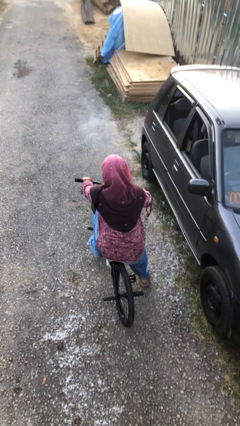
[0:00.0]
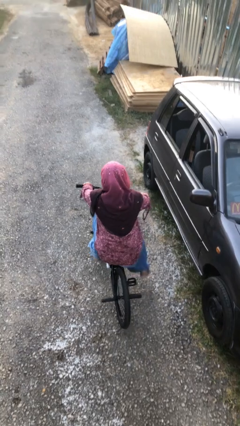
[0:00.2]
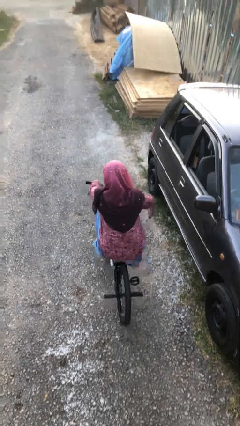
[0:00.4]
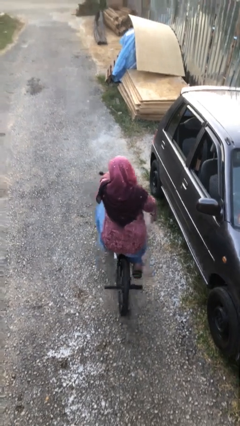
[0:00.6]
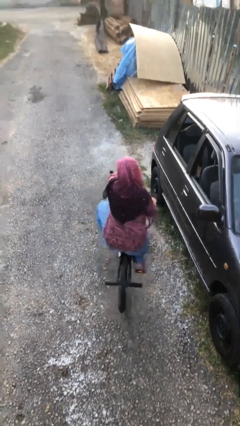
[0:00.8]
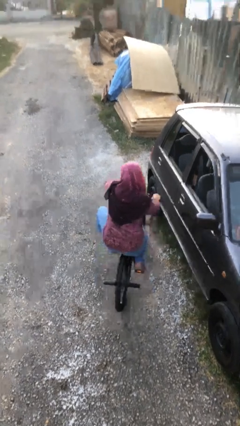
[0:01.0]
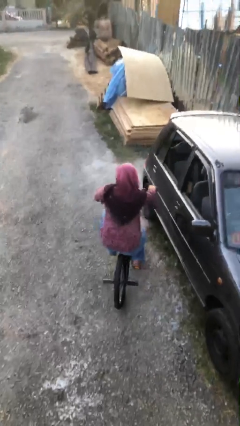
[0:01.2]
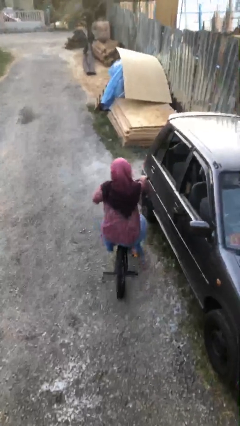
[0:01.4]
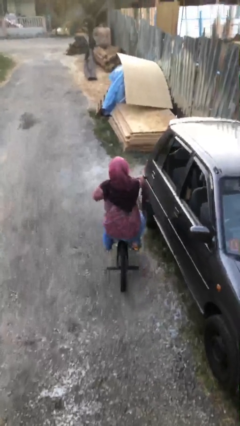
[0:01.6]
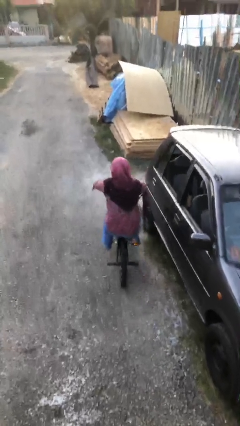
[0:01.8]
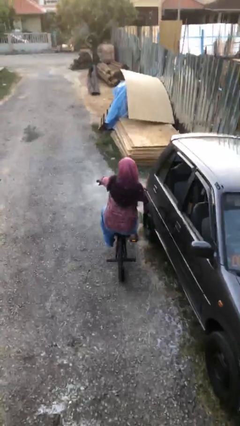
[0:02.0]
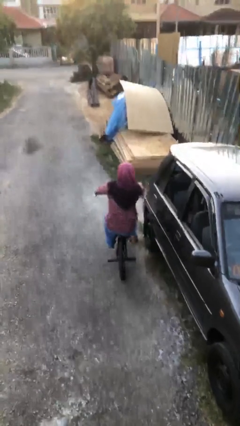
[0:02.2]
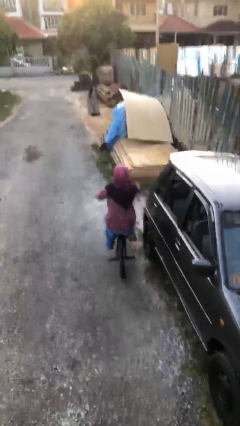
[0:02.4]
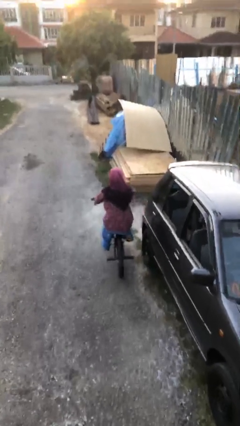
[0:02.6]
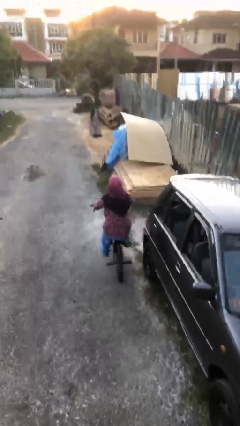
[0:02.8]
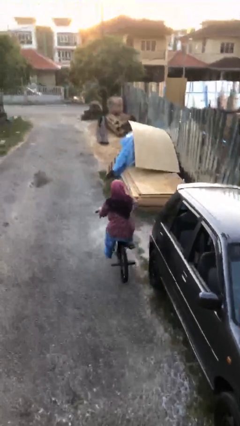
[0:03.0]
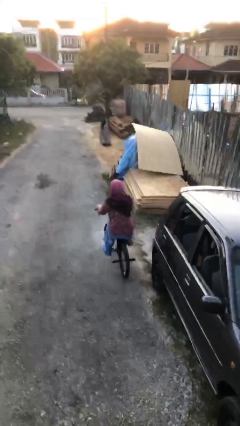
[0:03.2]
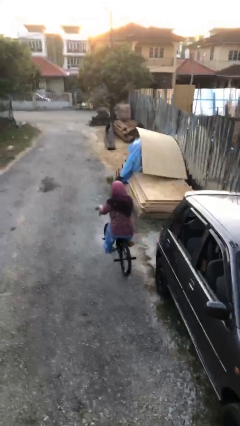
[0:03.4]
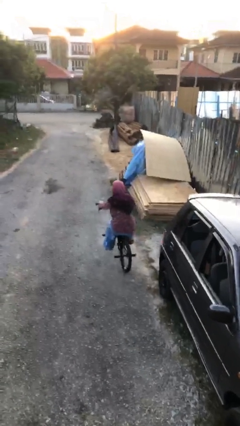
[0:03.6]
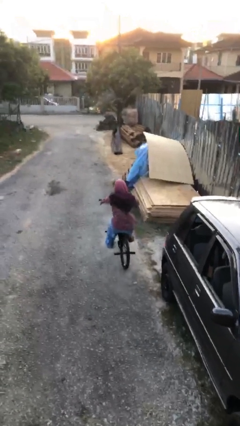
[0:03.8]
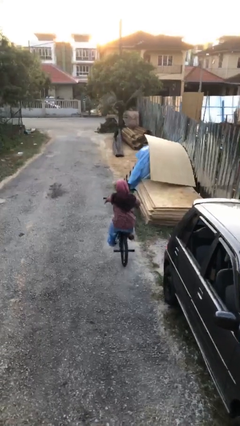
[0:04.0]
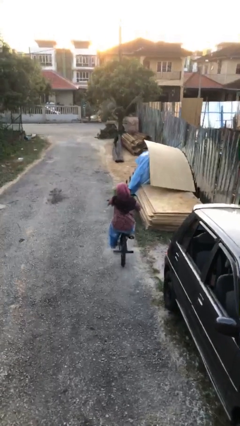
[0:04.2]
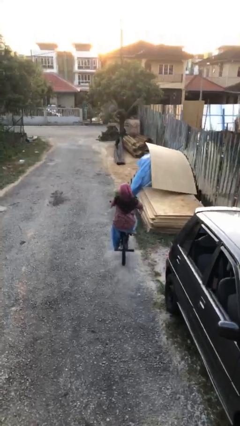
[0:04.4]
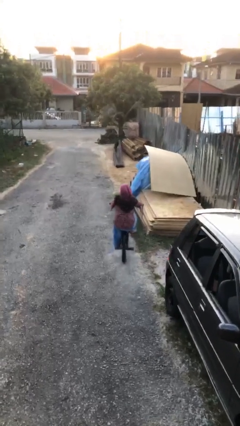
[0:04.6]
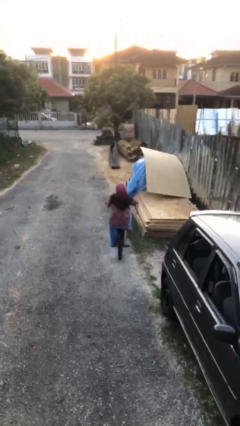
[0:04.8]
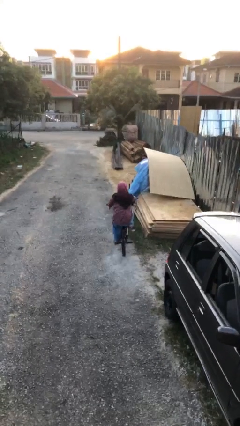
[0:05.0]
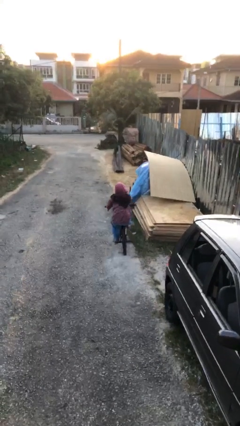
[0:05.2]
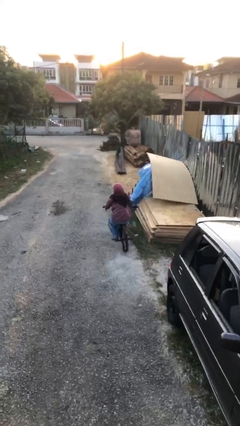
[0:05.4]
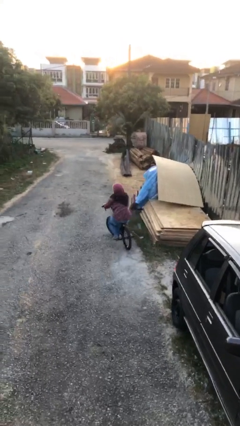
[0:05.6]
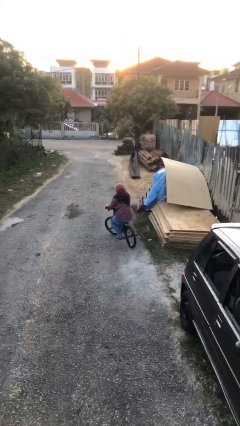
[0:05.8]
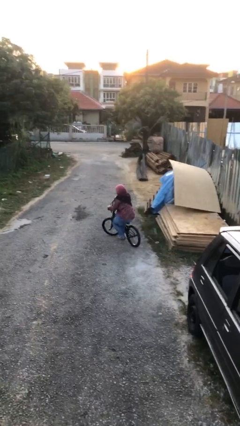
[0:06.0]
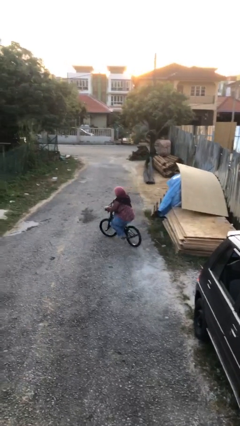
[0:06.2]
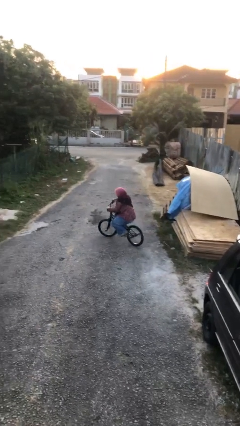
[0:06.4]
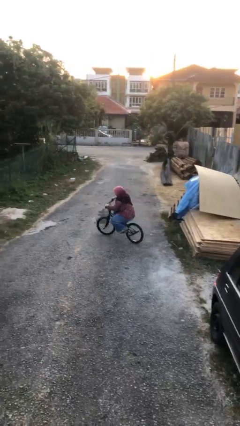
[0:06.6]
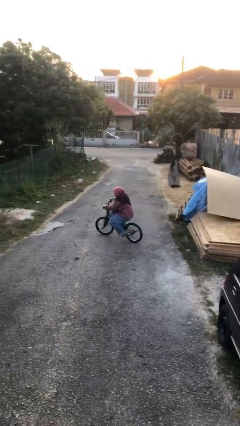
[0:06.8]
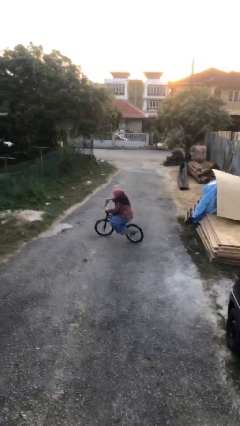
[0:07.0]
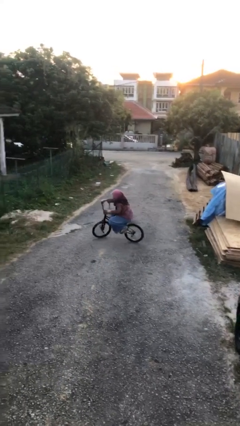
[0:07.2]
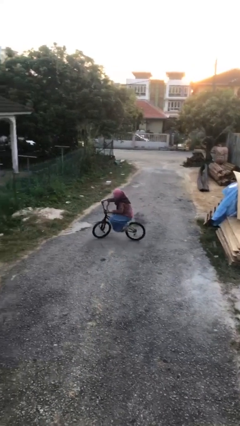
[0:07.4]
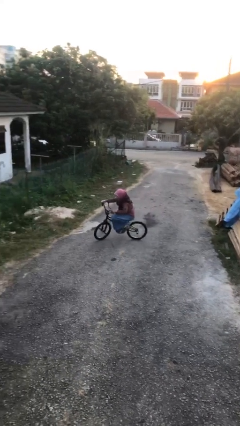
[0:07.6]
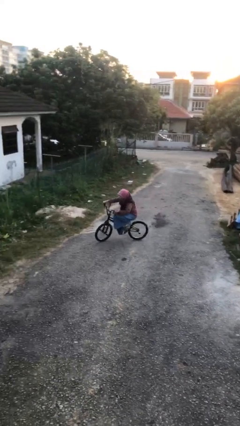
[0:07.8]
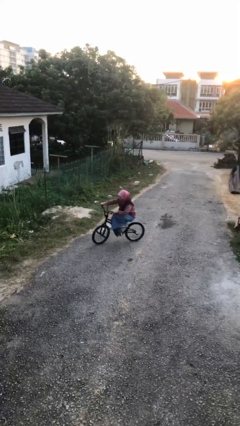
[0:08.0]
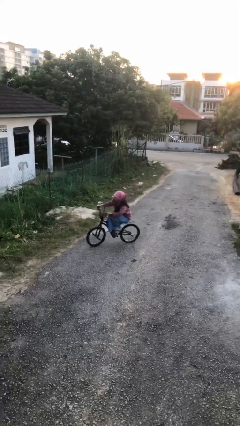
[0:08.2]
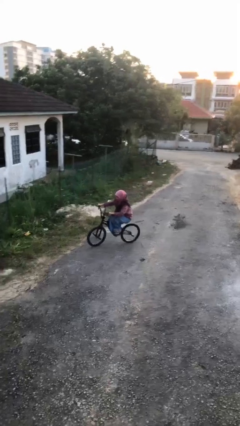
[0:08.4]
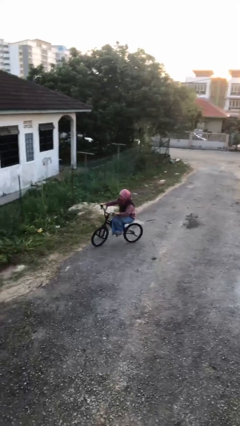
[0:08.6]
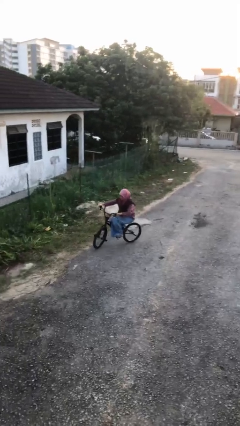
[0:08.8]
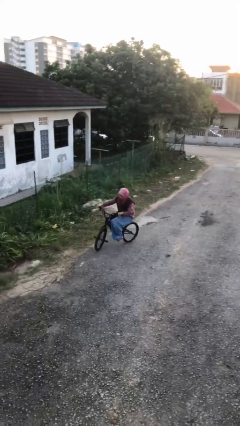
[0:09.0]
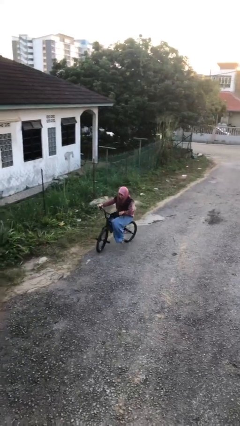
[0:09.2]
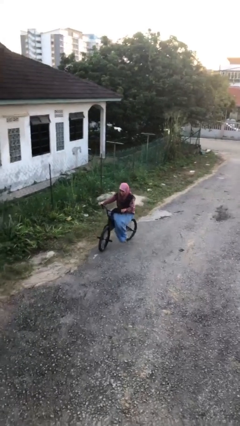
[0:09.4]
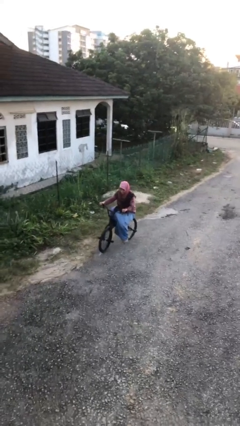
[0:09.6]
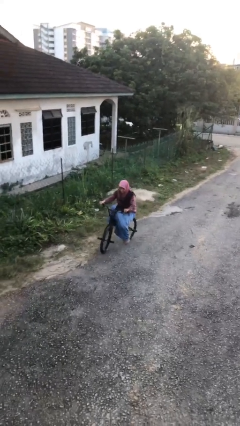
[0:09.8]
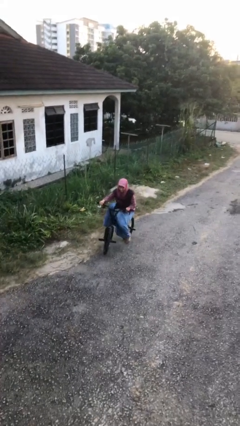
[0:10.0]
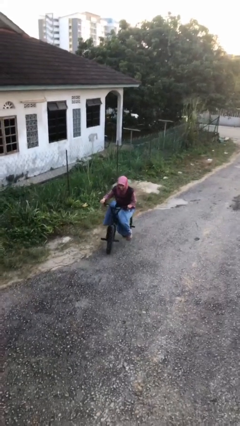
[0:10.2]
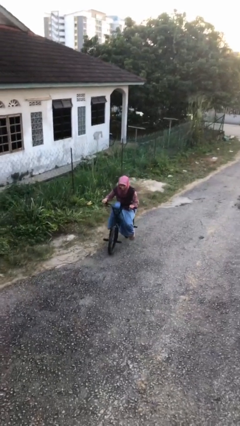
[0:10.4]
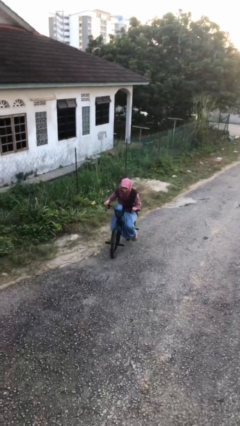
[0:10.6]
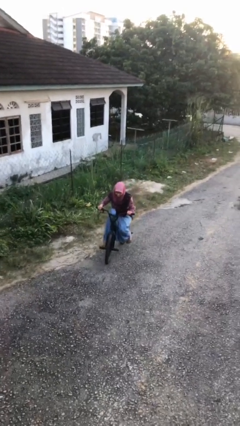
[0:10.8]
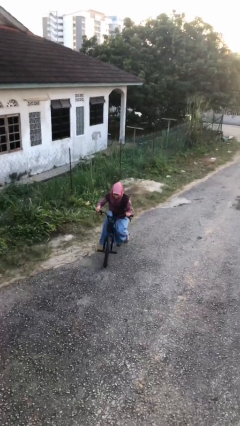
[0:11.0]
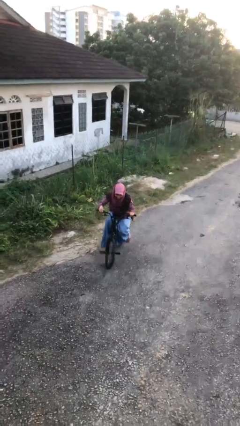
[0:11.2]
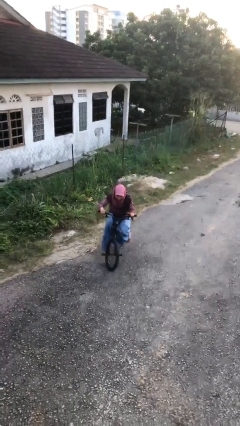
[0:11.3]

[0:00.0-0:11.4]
person rides bicycle

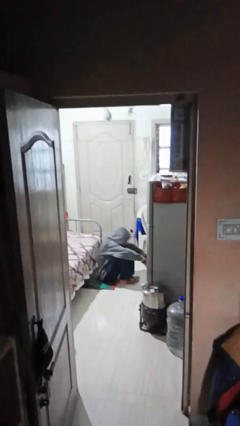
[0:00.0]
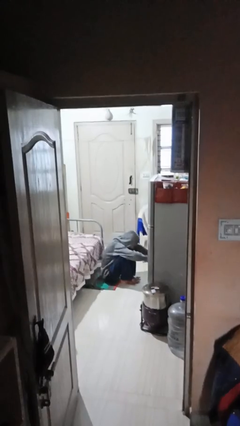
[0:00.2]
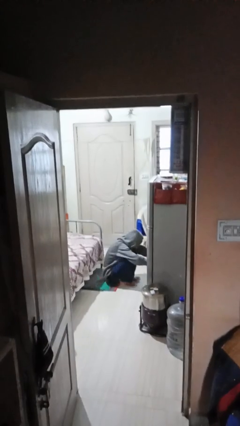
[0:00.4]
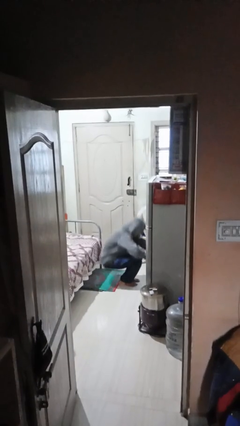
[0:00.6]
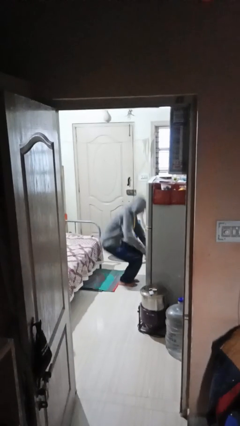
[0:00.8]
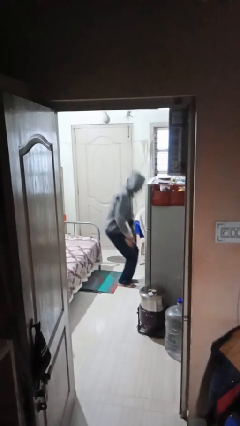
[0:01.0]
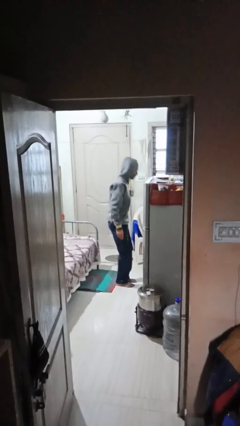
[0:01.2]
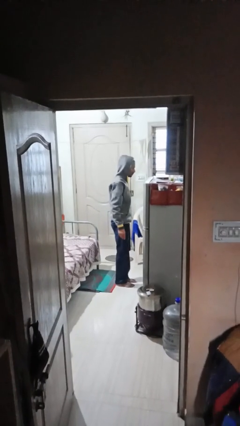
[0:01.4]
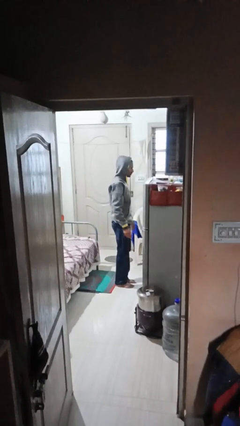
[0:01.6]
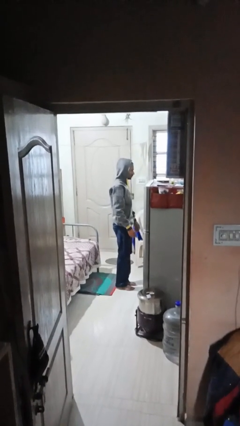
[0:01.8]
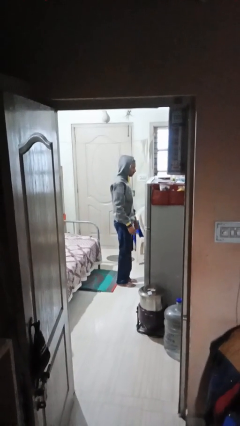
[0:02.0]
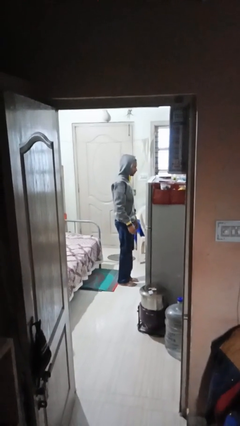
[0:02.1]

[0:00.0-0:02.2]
person stands up

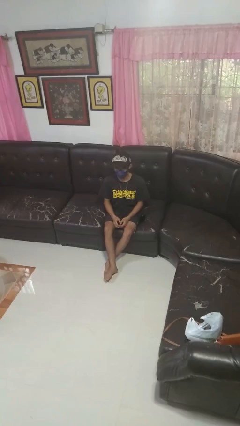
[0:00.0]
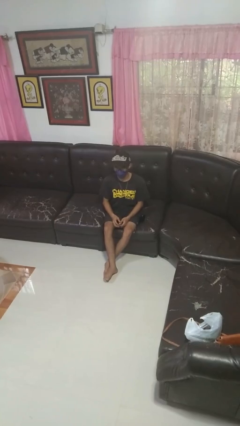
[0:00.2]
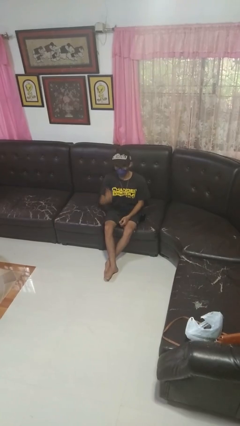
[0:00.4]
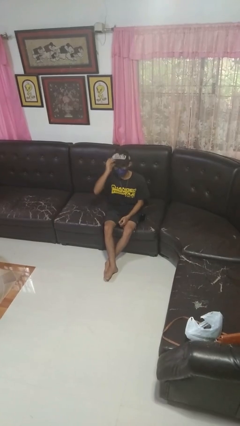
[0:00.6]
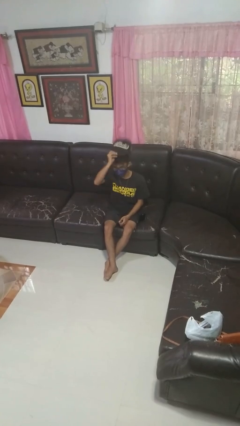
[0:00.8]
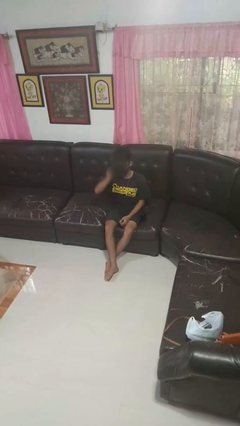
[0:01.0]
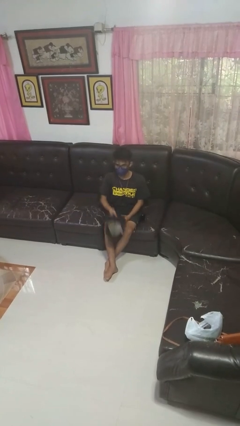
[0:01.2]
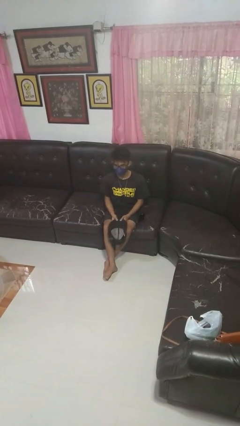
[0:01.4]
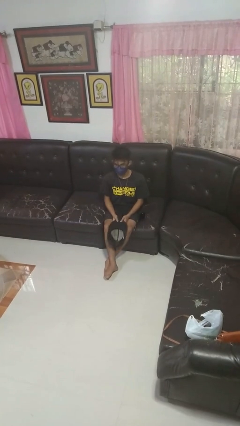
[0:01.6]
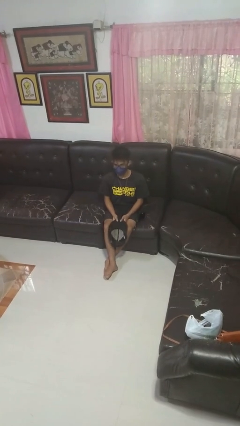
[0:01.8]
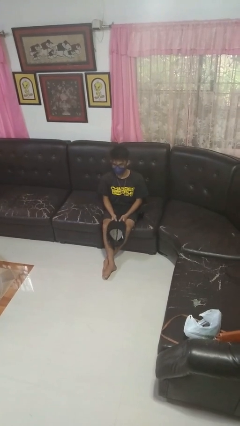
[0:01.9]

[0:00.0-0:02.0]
person takes off hat

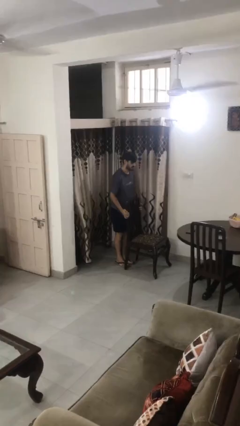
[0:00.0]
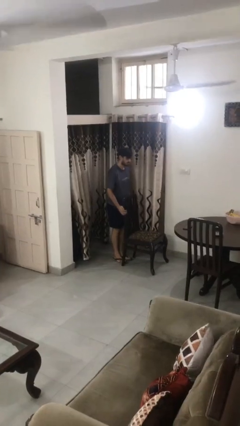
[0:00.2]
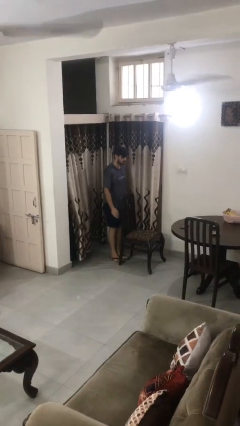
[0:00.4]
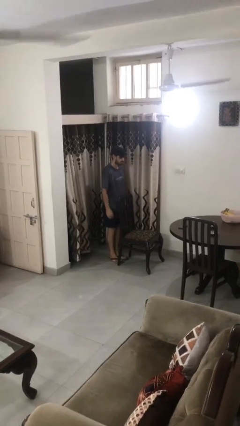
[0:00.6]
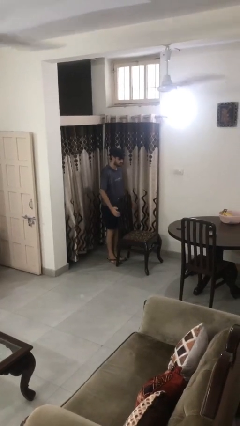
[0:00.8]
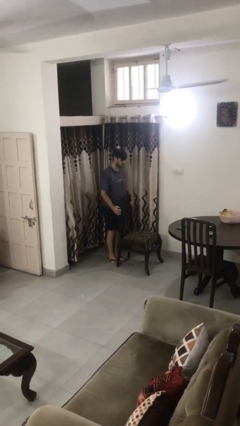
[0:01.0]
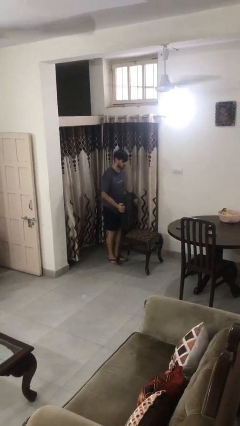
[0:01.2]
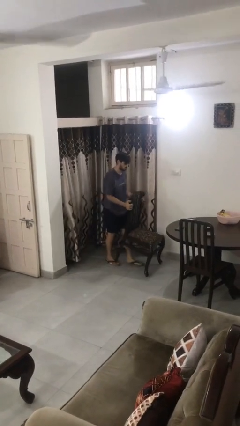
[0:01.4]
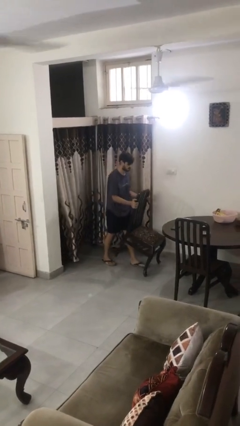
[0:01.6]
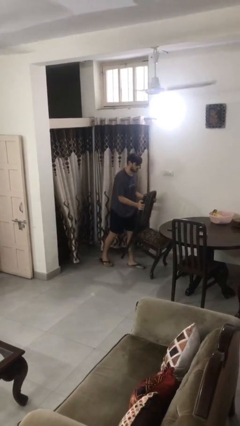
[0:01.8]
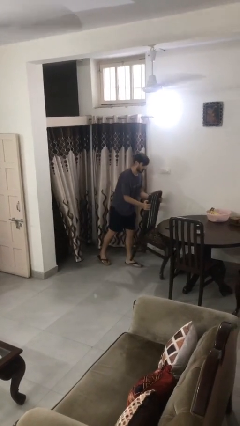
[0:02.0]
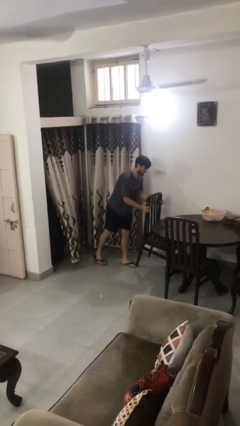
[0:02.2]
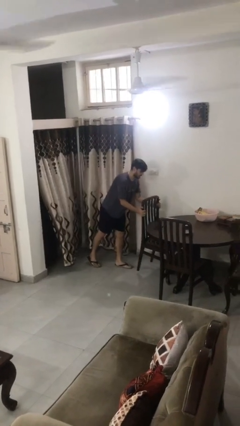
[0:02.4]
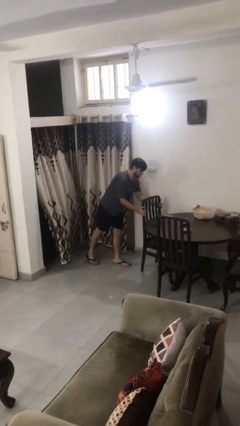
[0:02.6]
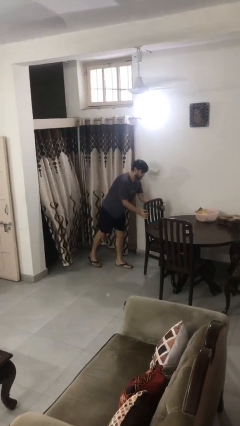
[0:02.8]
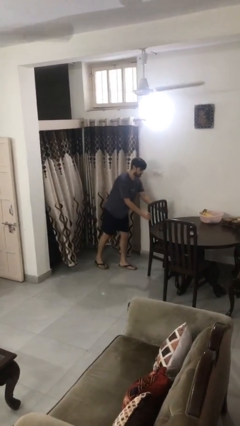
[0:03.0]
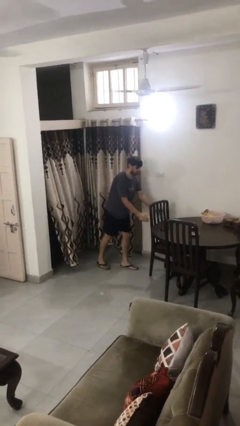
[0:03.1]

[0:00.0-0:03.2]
person pushes in chair
